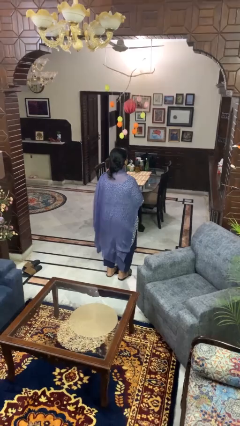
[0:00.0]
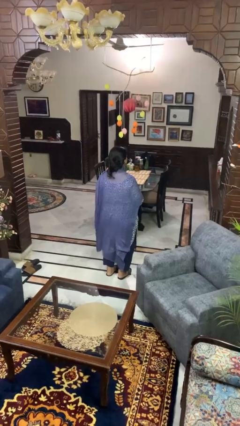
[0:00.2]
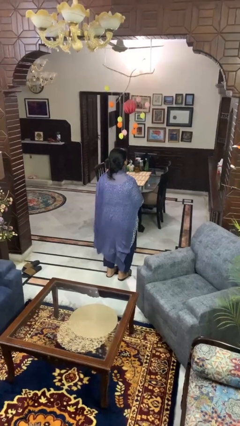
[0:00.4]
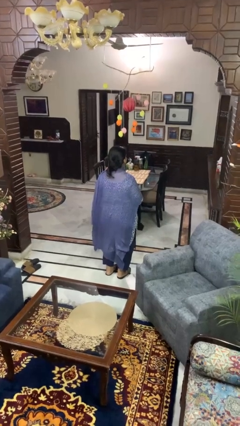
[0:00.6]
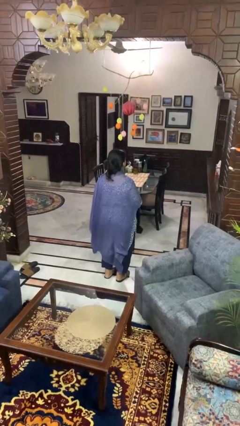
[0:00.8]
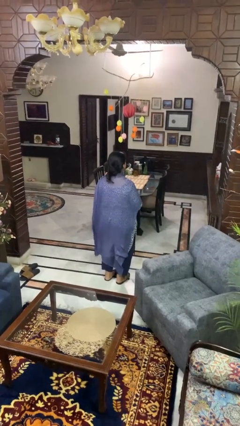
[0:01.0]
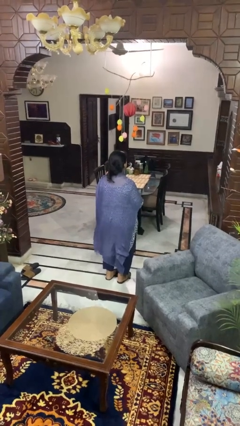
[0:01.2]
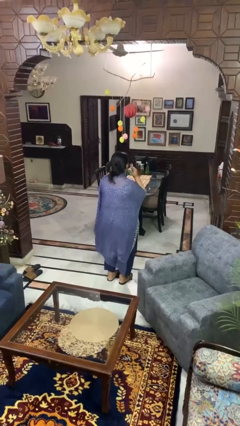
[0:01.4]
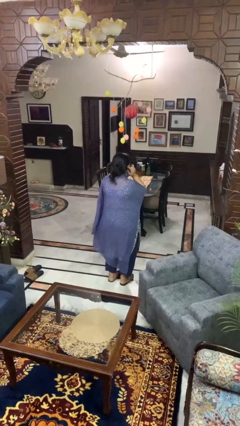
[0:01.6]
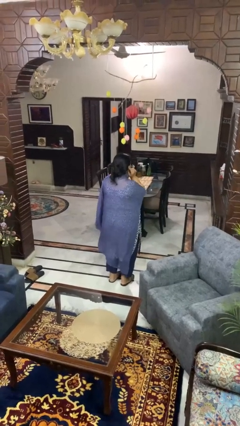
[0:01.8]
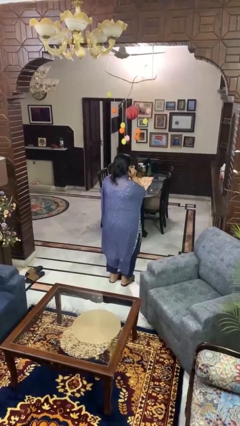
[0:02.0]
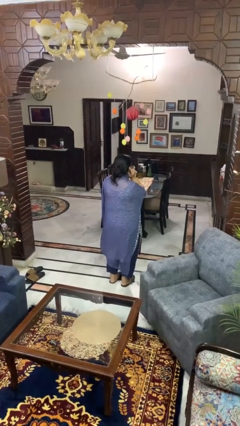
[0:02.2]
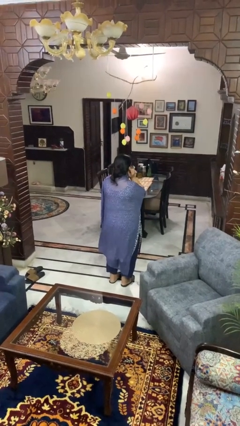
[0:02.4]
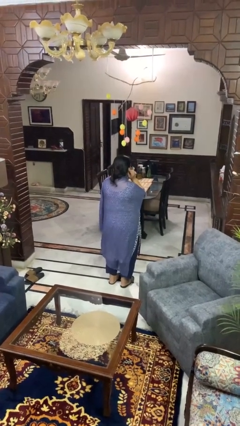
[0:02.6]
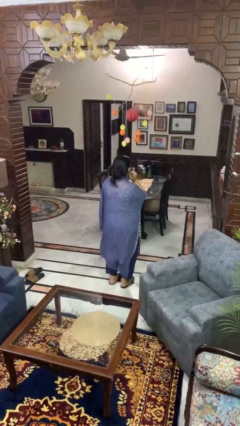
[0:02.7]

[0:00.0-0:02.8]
person puts fingers in ear

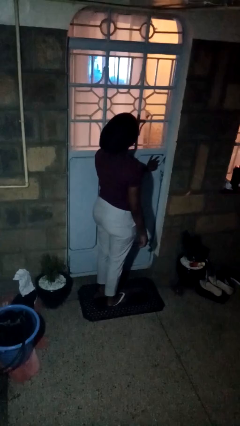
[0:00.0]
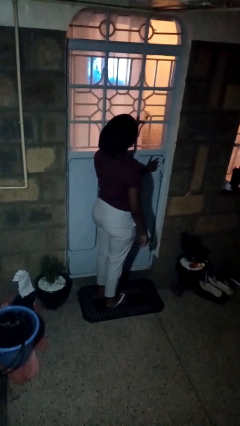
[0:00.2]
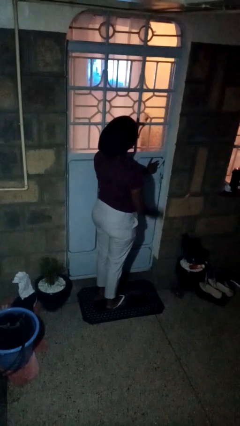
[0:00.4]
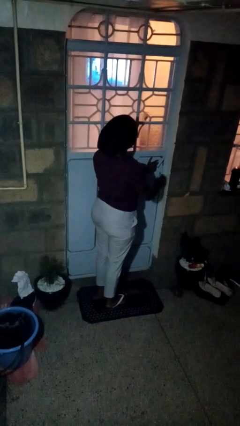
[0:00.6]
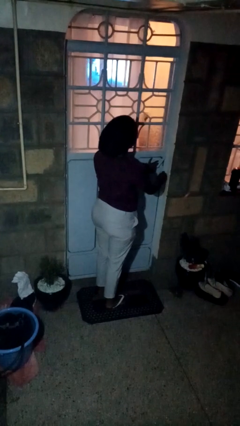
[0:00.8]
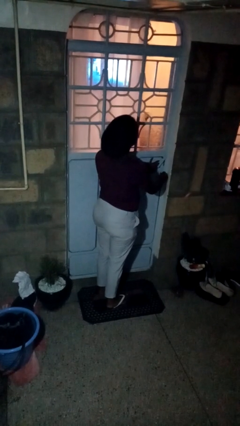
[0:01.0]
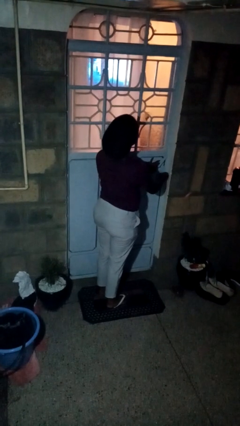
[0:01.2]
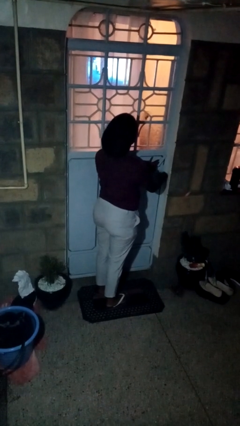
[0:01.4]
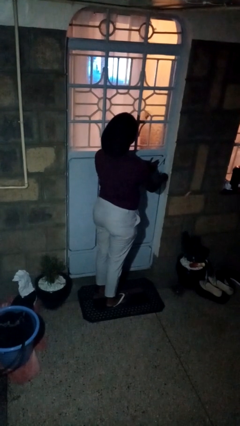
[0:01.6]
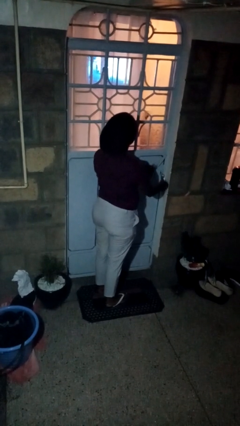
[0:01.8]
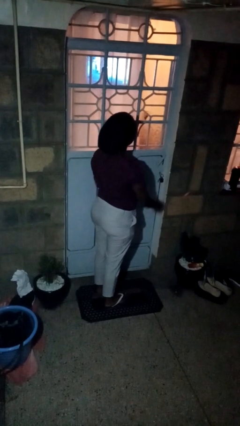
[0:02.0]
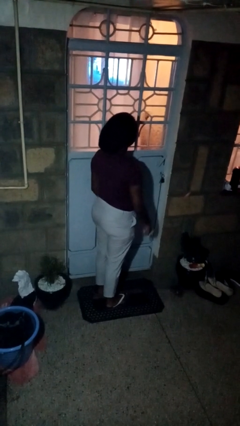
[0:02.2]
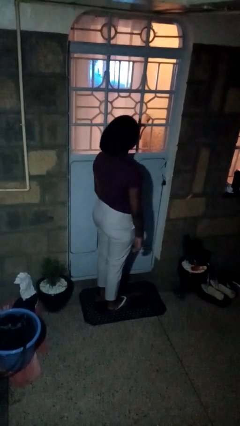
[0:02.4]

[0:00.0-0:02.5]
person locks door with keys

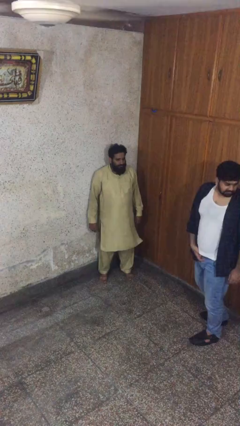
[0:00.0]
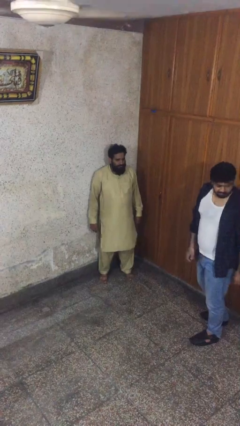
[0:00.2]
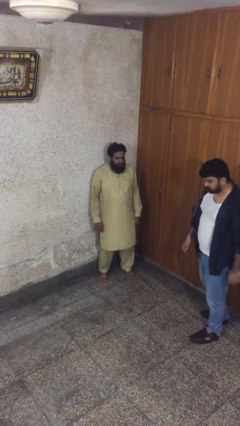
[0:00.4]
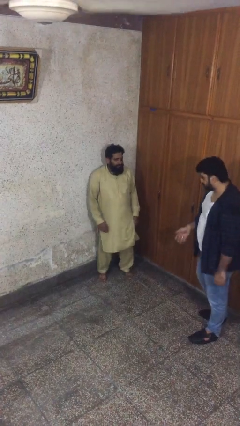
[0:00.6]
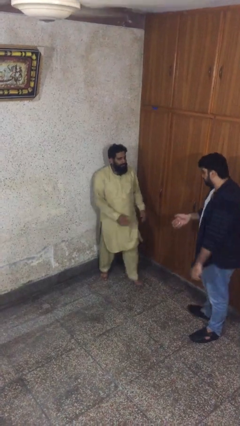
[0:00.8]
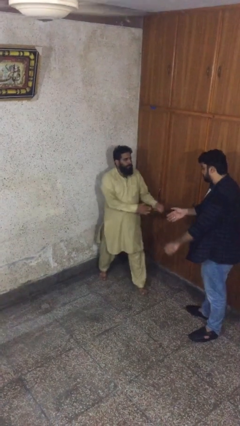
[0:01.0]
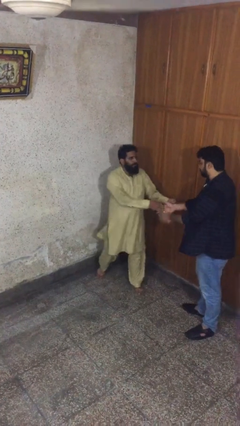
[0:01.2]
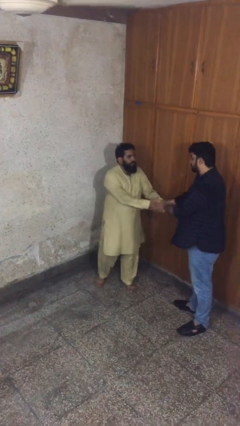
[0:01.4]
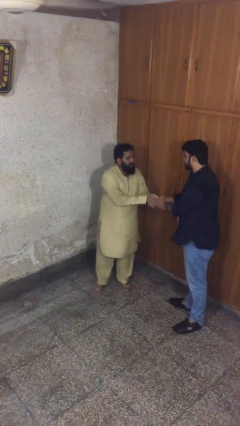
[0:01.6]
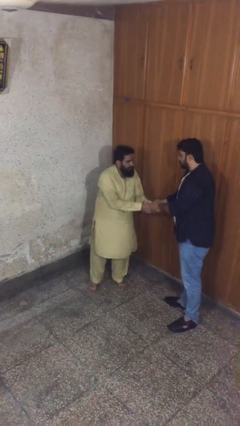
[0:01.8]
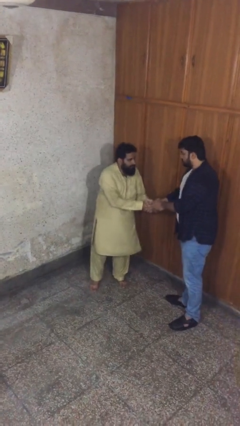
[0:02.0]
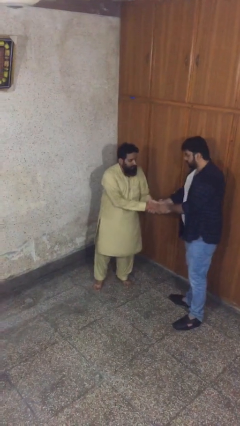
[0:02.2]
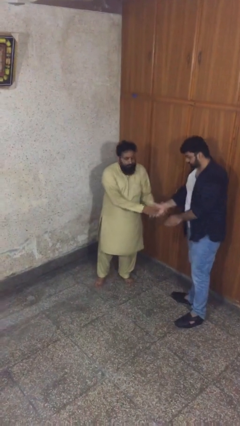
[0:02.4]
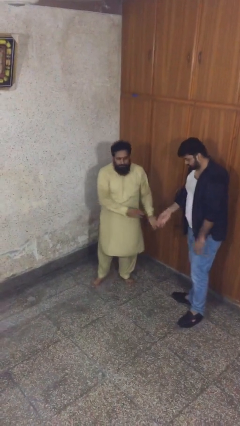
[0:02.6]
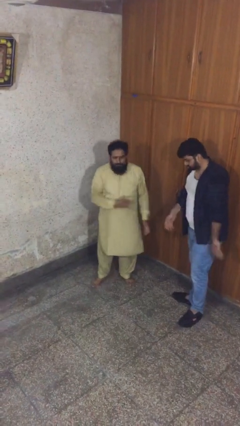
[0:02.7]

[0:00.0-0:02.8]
person shakes hand

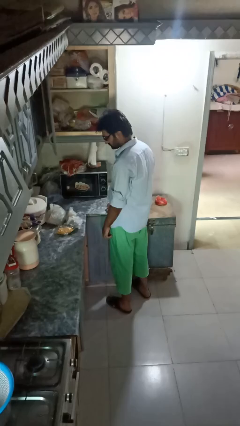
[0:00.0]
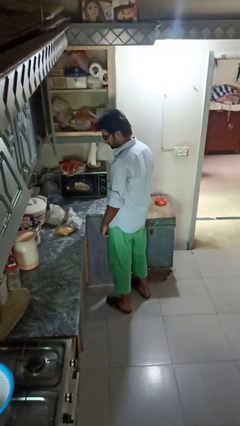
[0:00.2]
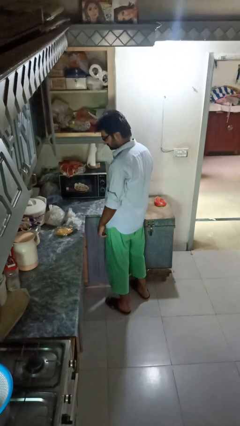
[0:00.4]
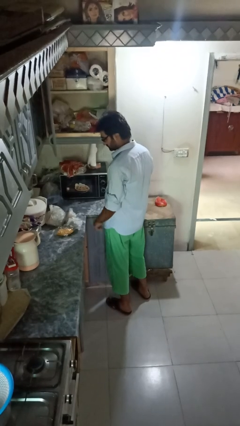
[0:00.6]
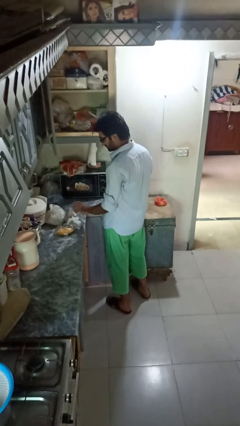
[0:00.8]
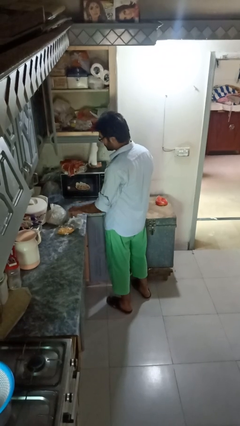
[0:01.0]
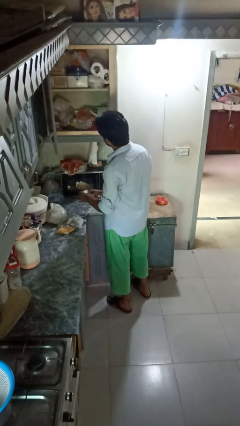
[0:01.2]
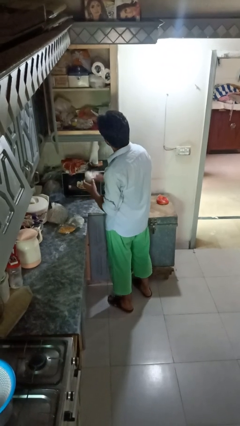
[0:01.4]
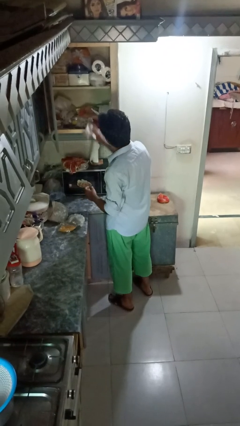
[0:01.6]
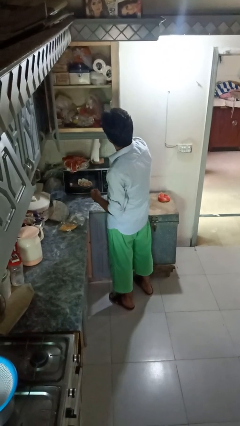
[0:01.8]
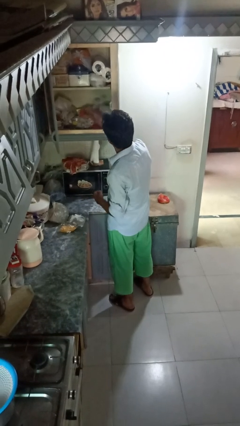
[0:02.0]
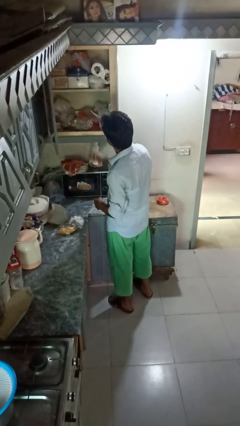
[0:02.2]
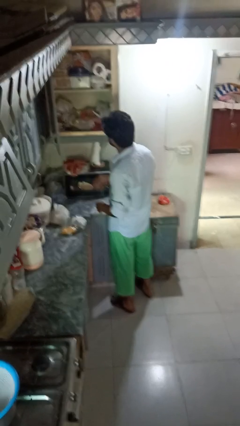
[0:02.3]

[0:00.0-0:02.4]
person loads groceries into cabinet

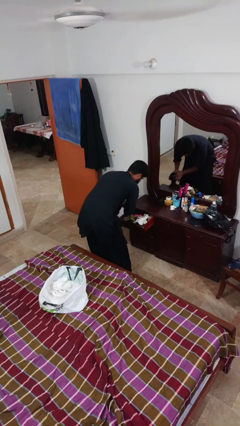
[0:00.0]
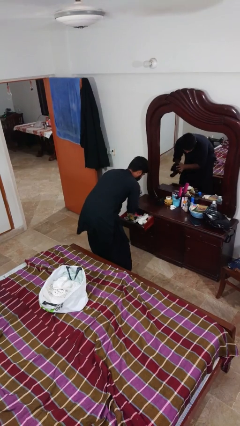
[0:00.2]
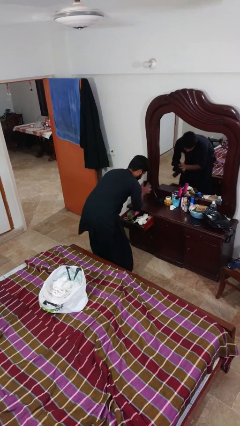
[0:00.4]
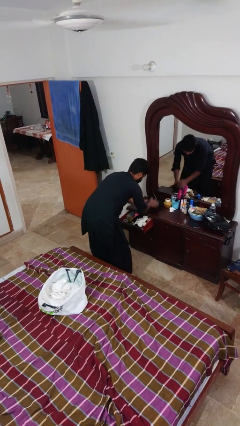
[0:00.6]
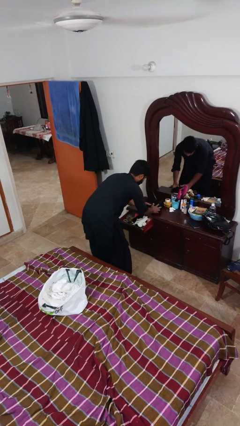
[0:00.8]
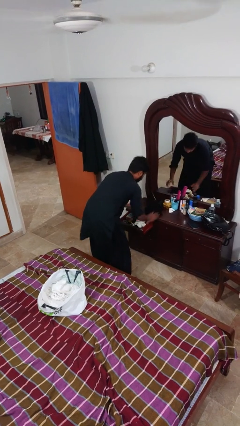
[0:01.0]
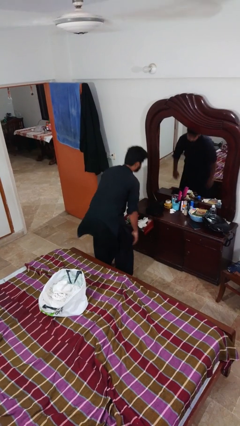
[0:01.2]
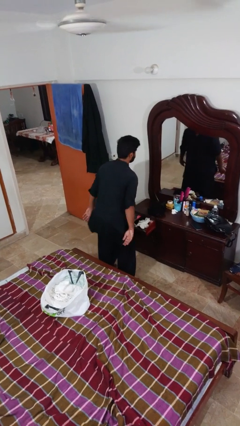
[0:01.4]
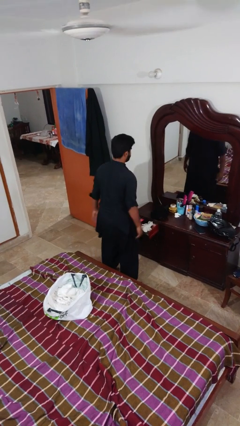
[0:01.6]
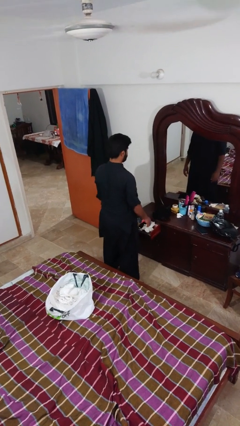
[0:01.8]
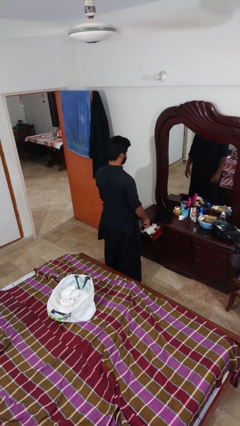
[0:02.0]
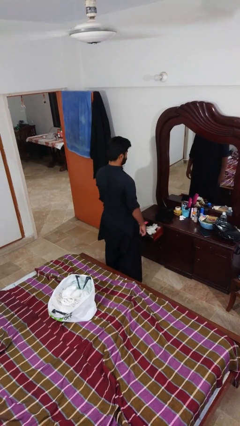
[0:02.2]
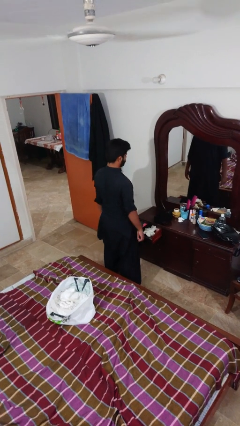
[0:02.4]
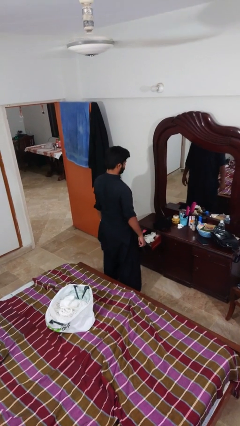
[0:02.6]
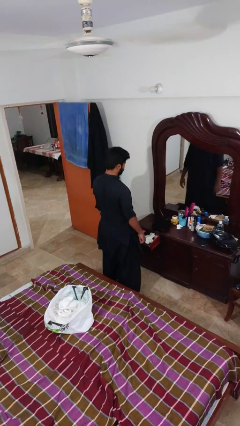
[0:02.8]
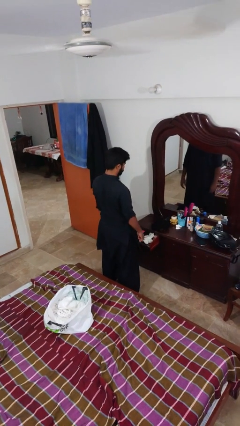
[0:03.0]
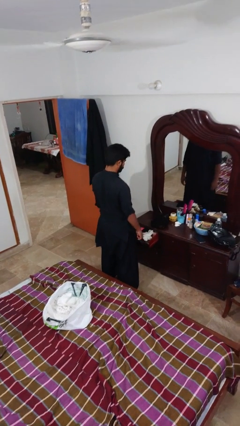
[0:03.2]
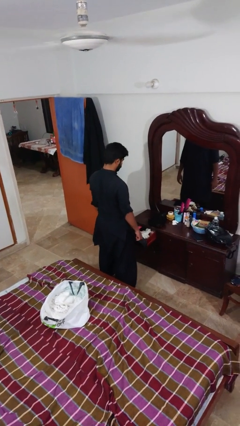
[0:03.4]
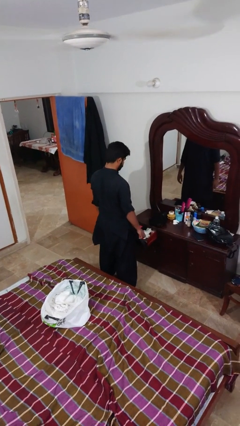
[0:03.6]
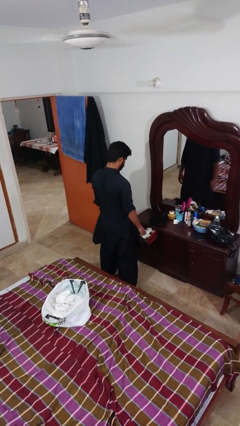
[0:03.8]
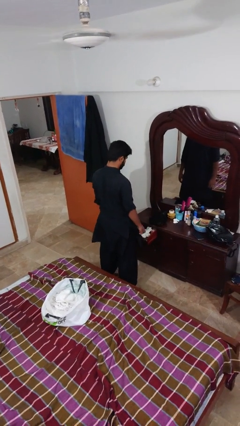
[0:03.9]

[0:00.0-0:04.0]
person takes clothes from dresser

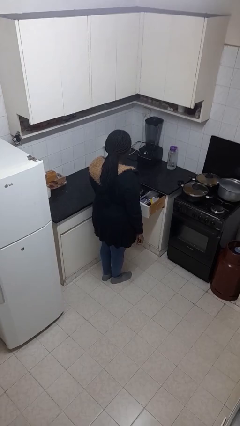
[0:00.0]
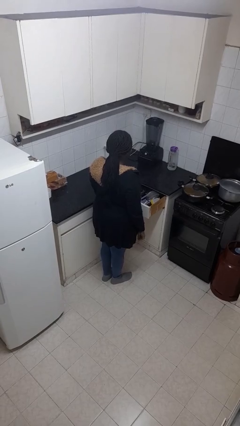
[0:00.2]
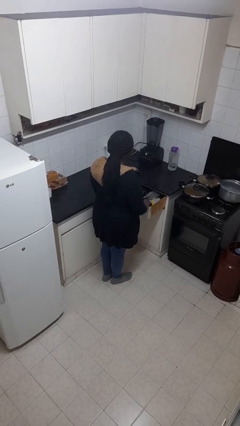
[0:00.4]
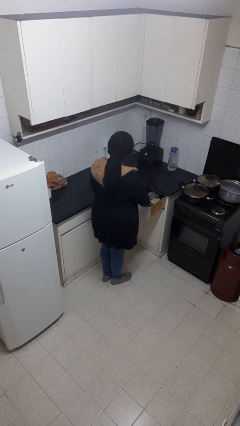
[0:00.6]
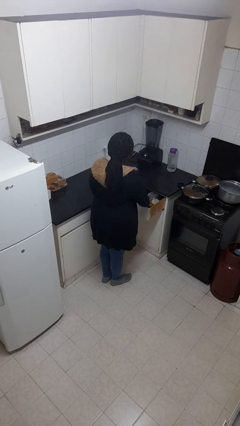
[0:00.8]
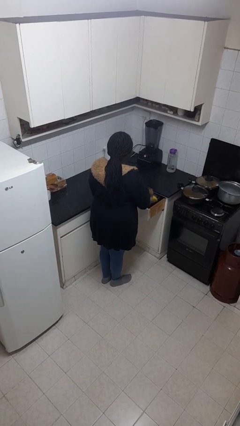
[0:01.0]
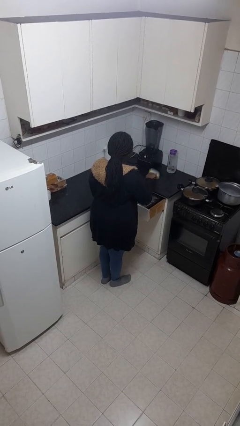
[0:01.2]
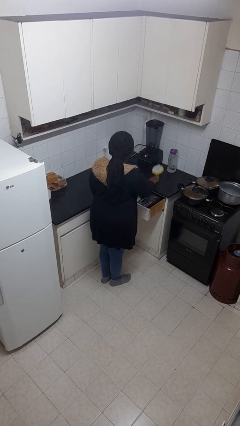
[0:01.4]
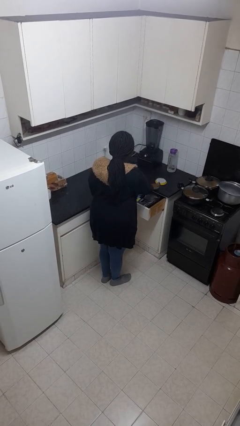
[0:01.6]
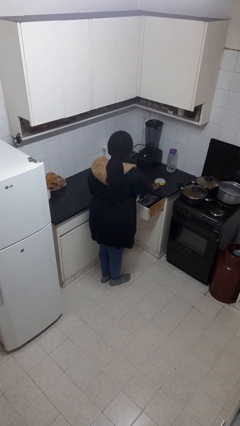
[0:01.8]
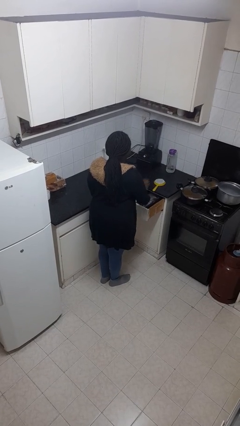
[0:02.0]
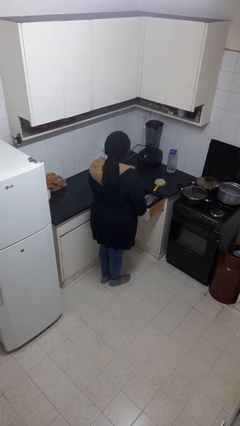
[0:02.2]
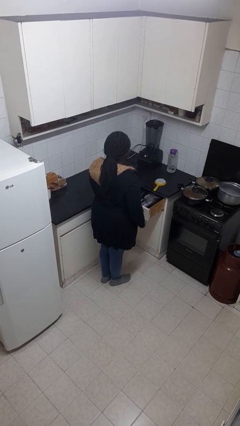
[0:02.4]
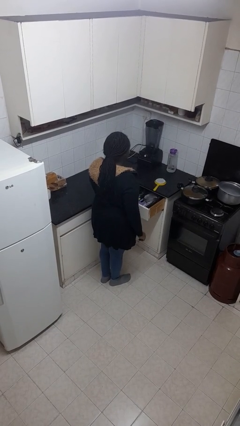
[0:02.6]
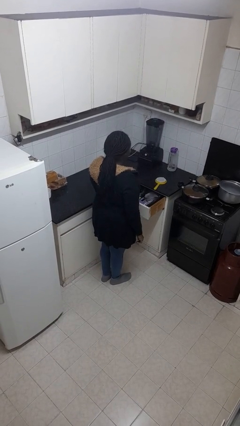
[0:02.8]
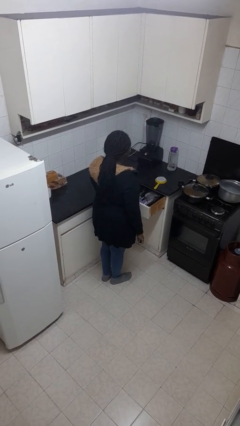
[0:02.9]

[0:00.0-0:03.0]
person takes object from kitchen drawer
